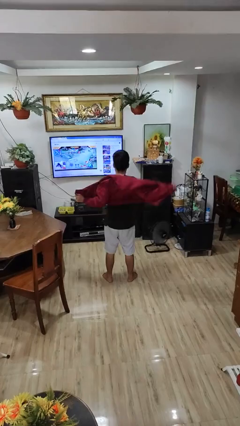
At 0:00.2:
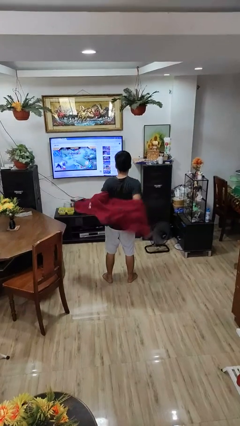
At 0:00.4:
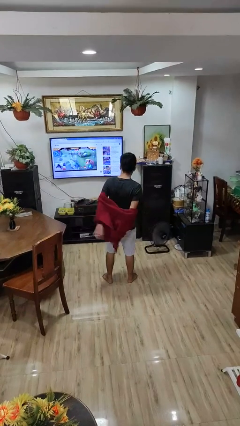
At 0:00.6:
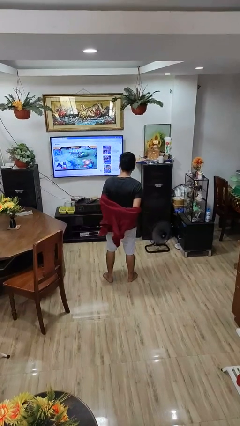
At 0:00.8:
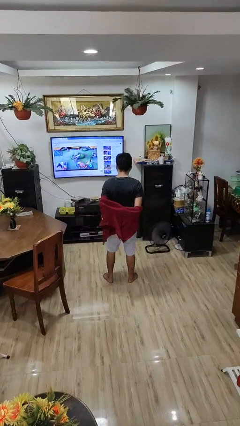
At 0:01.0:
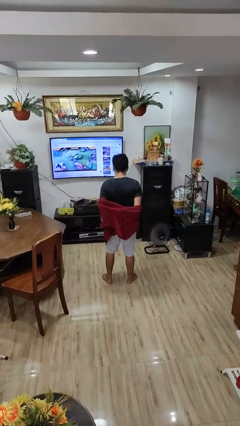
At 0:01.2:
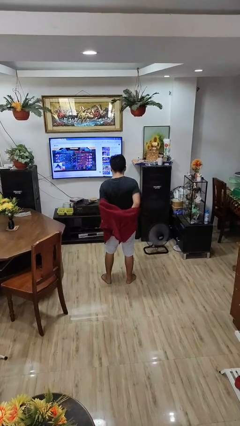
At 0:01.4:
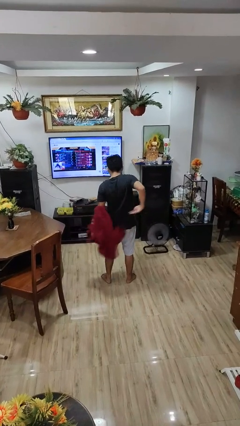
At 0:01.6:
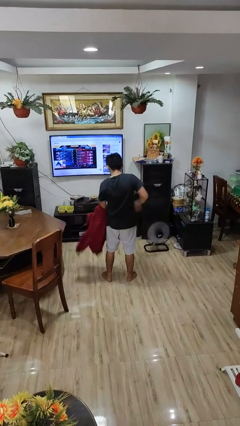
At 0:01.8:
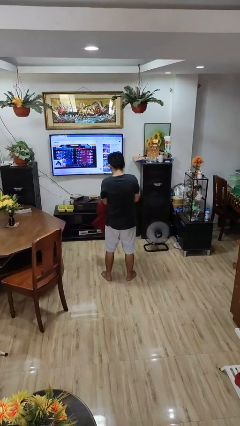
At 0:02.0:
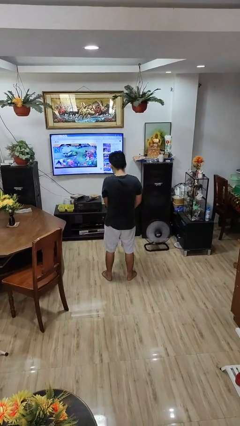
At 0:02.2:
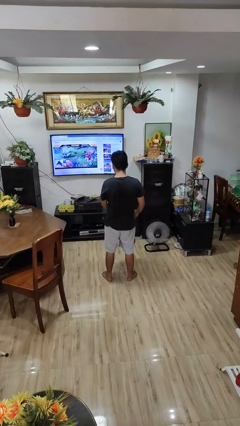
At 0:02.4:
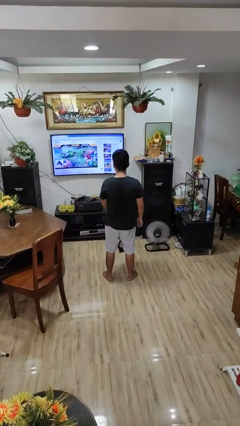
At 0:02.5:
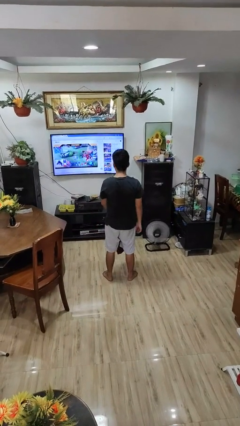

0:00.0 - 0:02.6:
person takes off jacket

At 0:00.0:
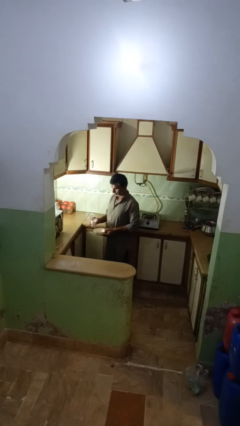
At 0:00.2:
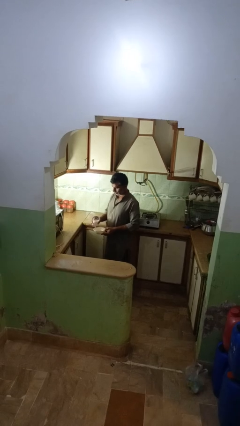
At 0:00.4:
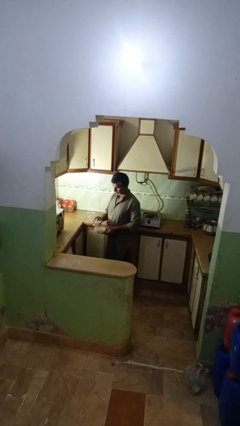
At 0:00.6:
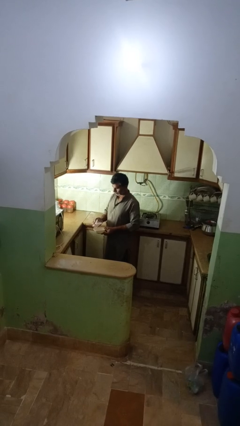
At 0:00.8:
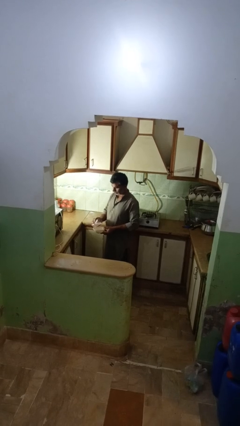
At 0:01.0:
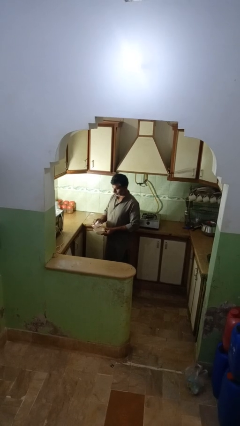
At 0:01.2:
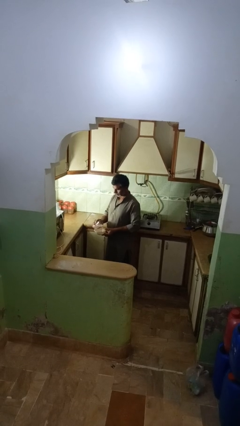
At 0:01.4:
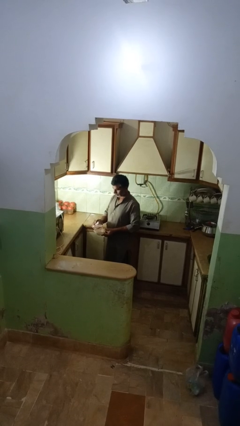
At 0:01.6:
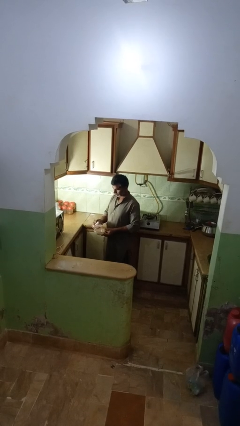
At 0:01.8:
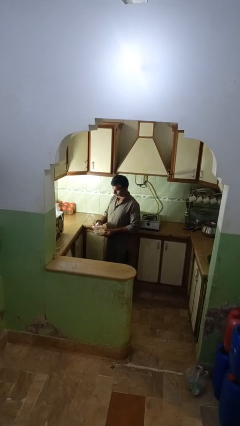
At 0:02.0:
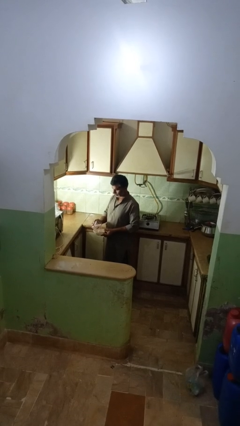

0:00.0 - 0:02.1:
person pours into bowl

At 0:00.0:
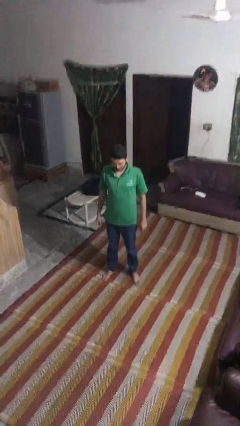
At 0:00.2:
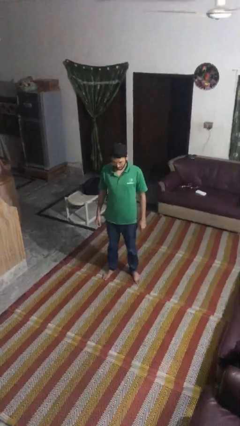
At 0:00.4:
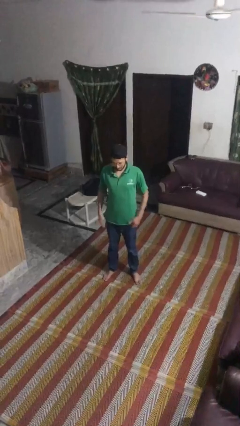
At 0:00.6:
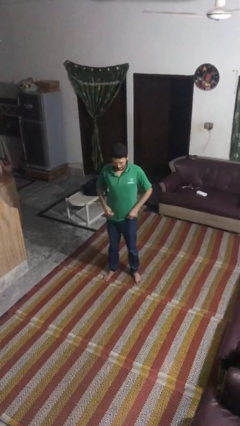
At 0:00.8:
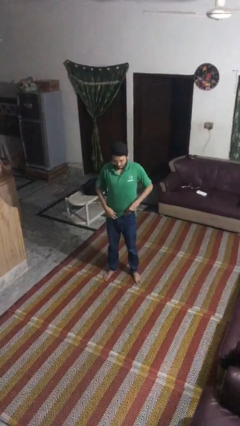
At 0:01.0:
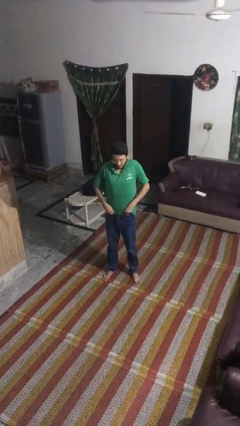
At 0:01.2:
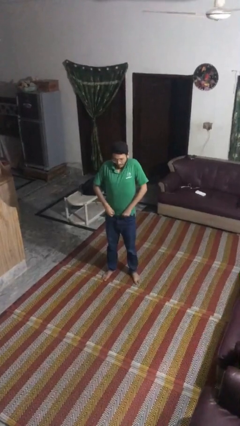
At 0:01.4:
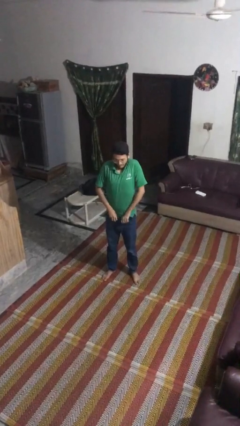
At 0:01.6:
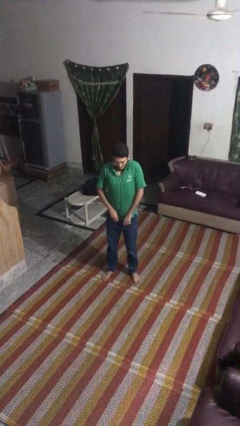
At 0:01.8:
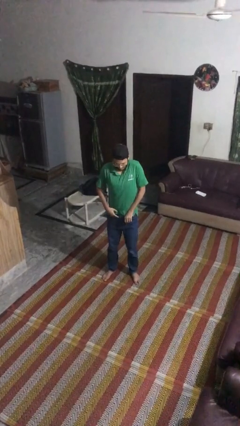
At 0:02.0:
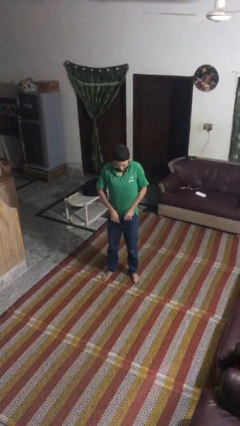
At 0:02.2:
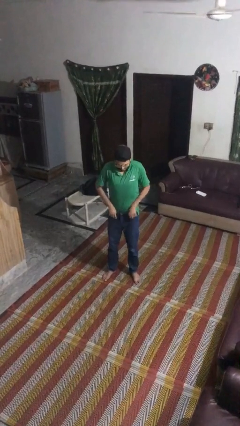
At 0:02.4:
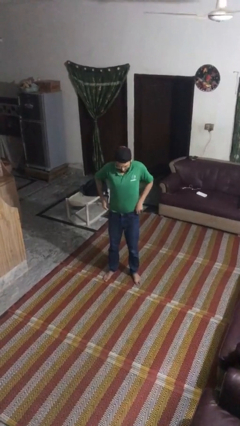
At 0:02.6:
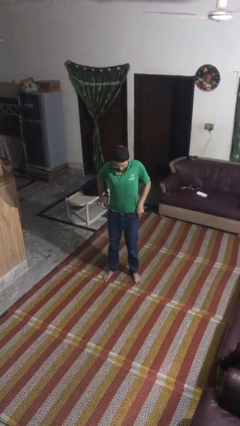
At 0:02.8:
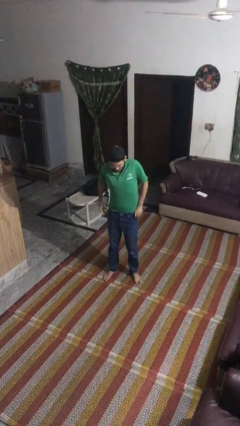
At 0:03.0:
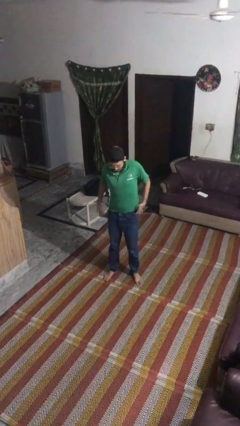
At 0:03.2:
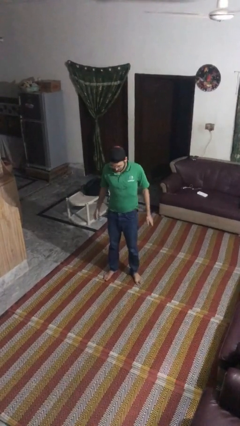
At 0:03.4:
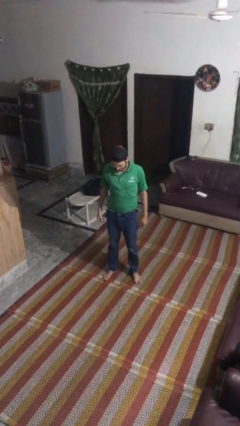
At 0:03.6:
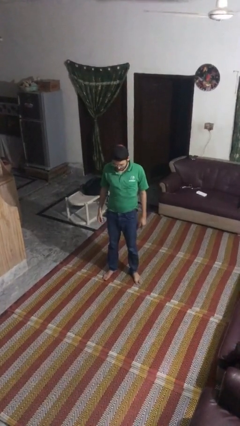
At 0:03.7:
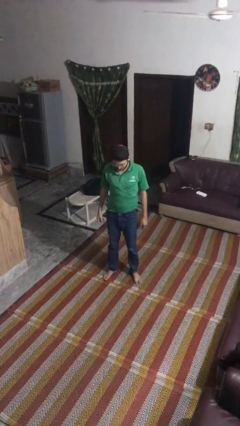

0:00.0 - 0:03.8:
person tucks in shirt

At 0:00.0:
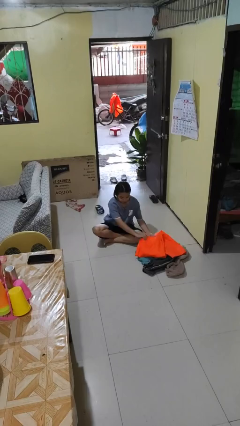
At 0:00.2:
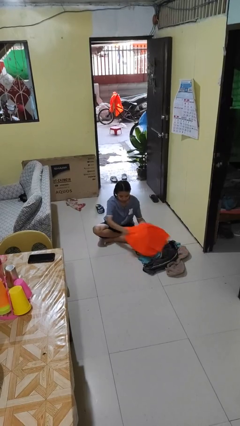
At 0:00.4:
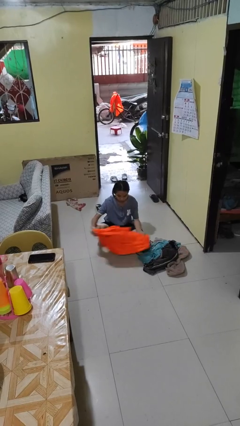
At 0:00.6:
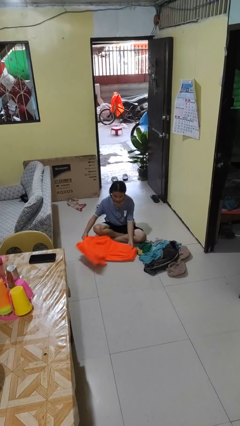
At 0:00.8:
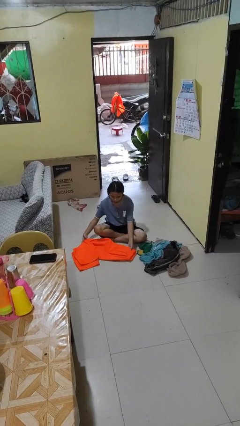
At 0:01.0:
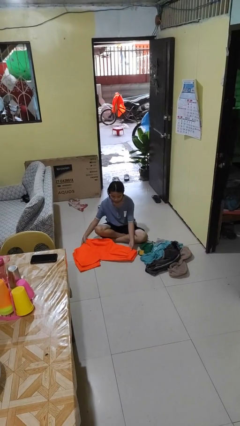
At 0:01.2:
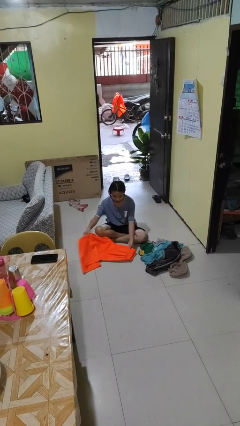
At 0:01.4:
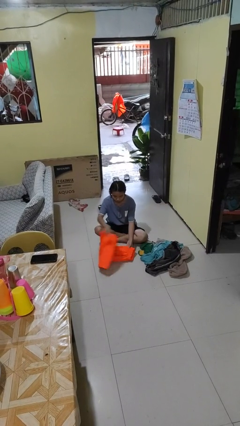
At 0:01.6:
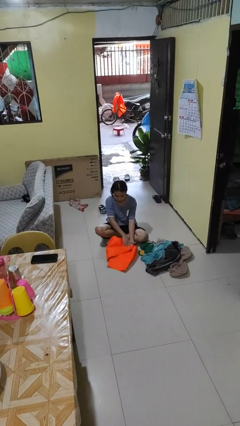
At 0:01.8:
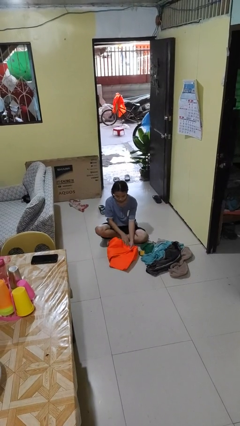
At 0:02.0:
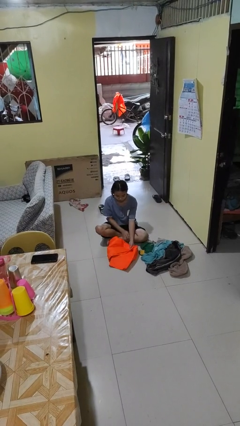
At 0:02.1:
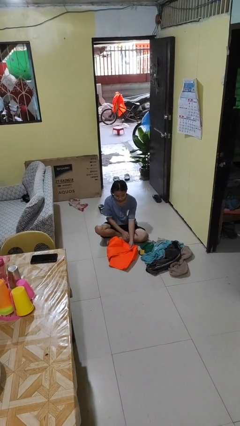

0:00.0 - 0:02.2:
person folds pants

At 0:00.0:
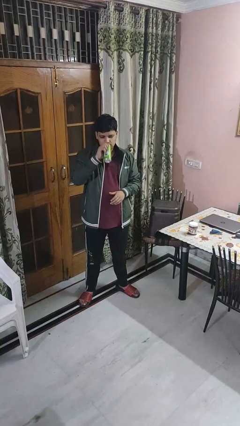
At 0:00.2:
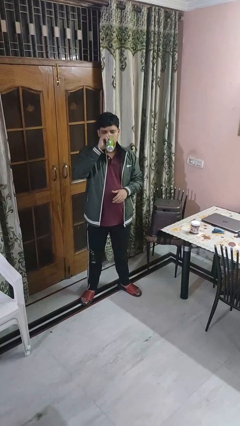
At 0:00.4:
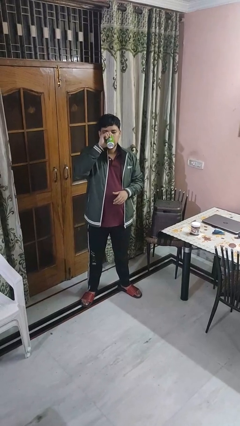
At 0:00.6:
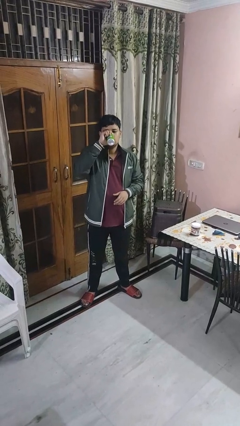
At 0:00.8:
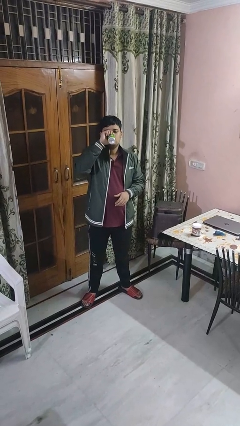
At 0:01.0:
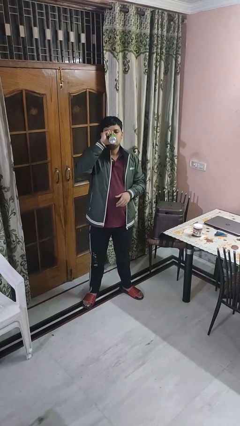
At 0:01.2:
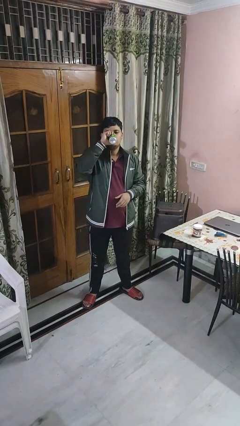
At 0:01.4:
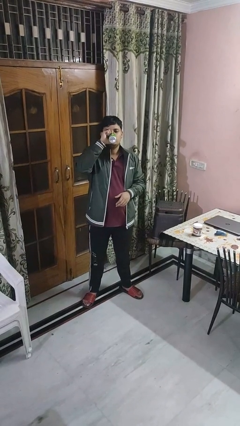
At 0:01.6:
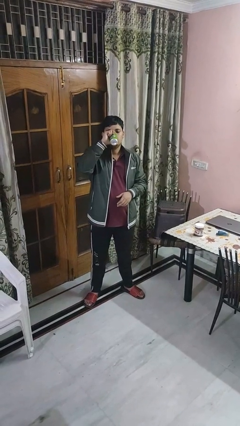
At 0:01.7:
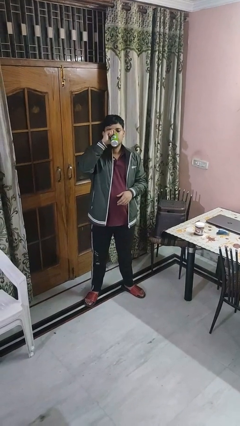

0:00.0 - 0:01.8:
person drinks from beverage can

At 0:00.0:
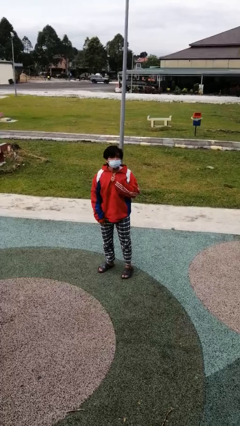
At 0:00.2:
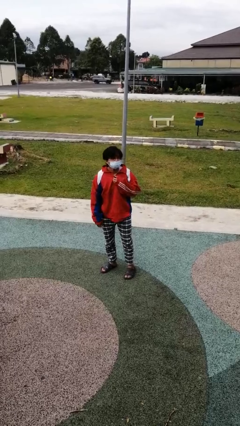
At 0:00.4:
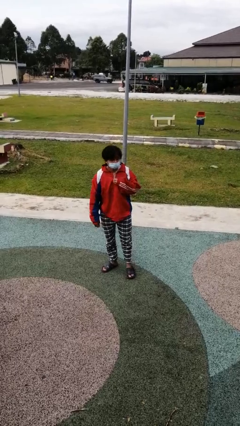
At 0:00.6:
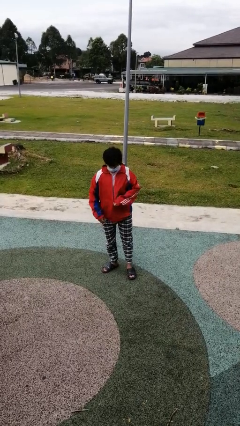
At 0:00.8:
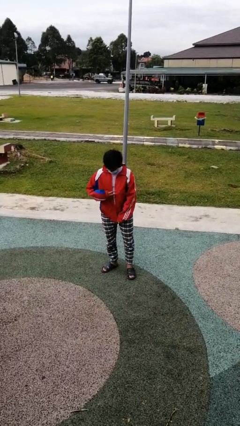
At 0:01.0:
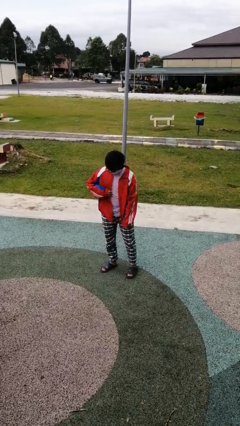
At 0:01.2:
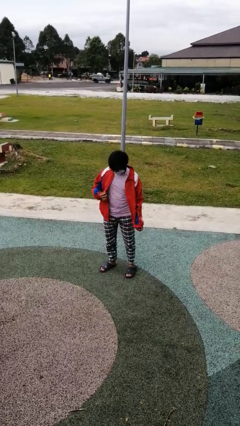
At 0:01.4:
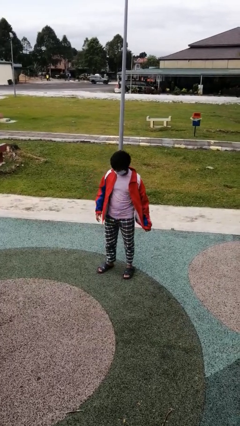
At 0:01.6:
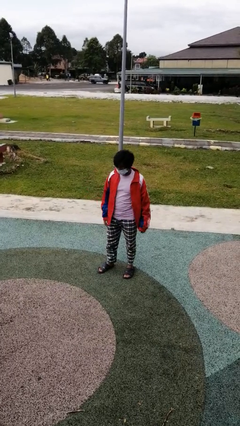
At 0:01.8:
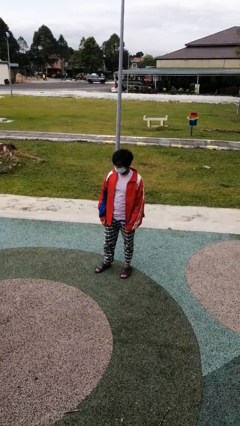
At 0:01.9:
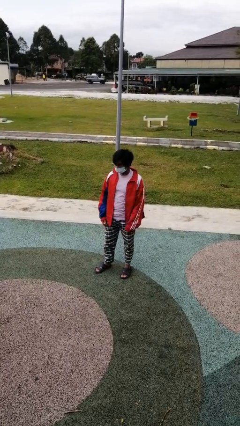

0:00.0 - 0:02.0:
person unzips jacket

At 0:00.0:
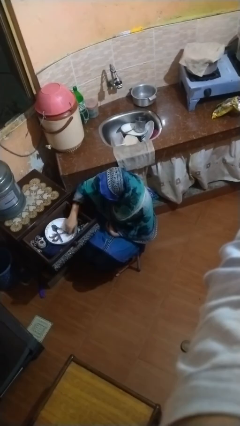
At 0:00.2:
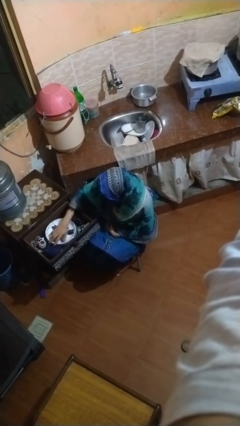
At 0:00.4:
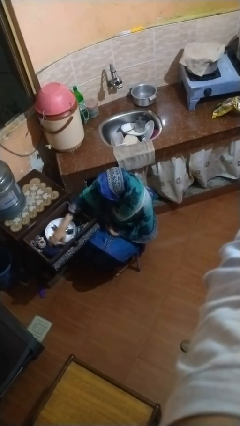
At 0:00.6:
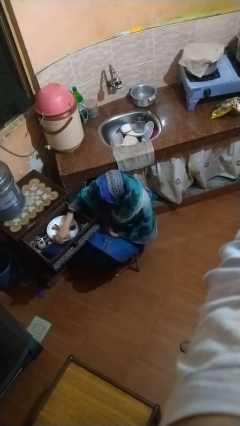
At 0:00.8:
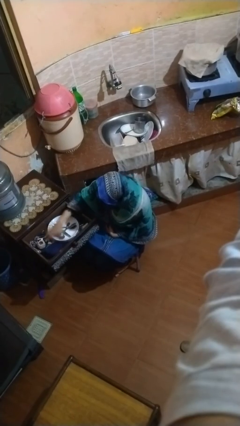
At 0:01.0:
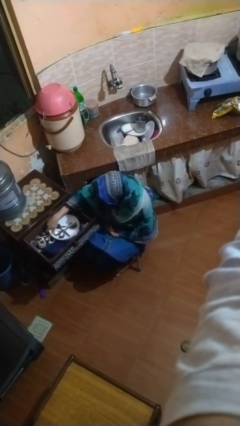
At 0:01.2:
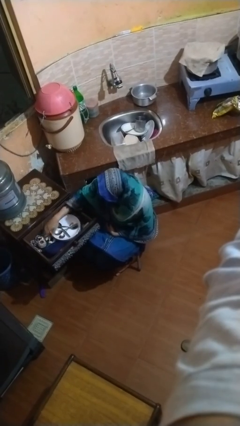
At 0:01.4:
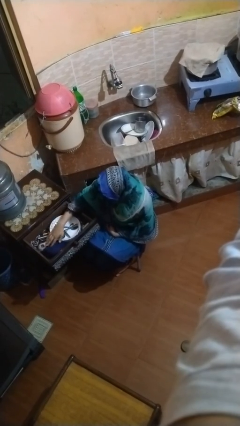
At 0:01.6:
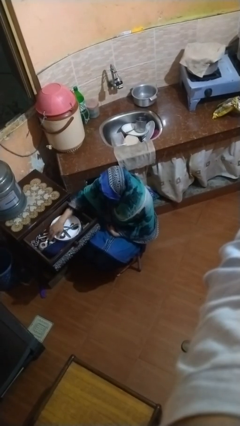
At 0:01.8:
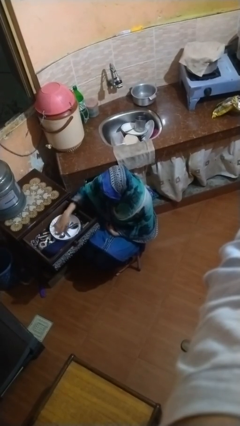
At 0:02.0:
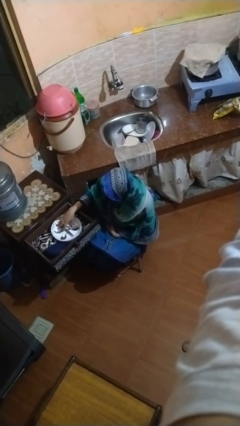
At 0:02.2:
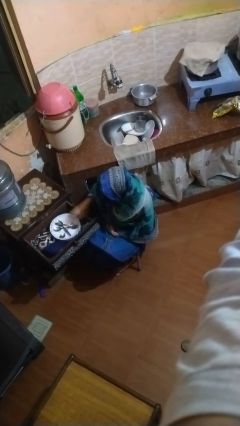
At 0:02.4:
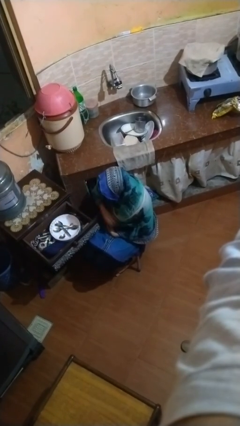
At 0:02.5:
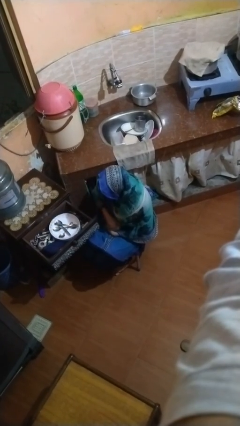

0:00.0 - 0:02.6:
person searches in kitchen drawer
